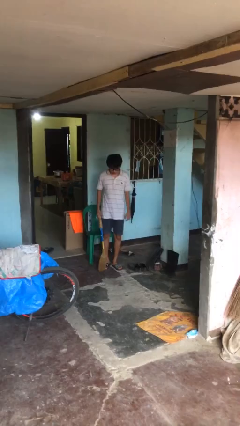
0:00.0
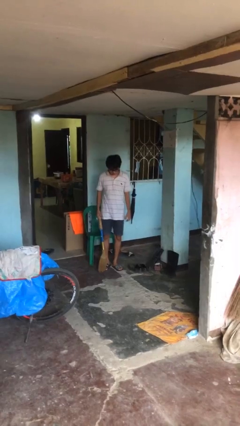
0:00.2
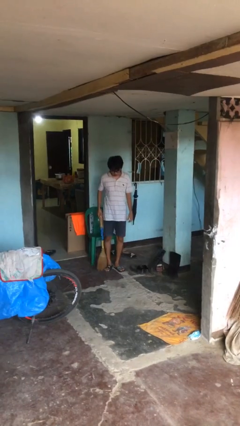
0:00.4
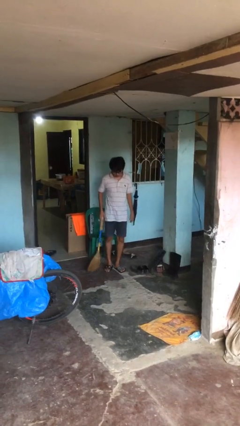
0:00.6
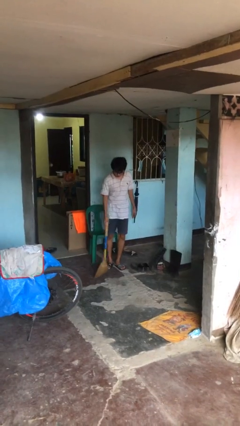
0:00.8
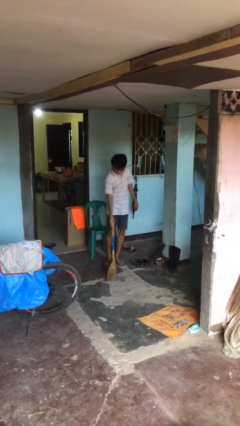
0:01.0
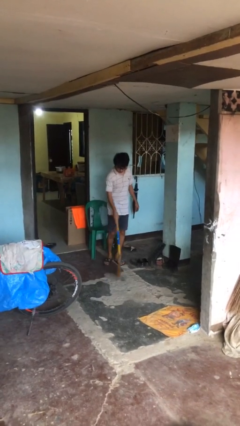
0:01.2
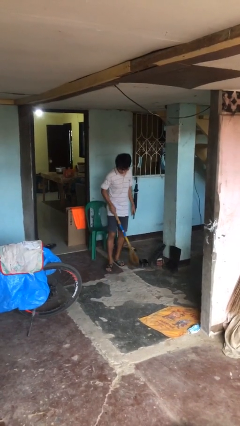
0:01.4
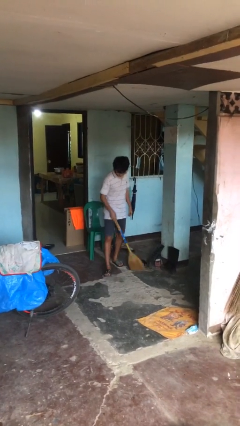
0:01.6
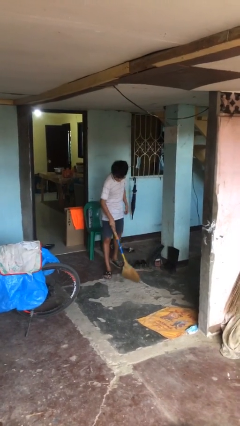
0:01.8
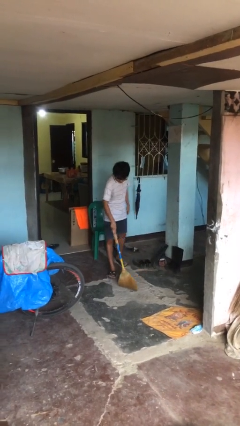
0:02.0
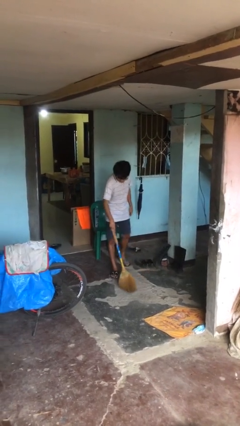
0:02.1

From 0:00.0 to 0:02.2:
person sweeps floor

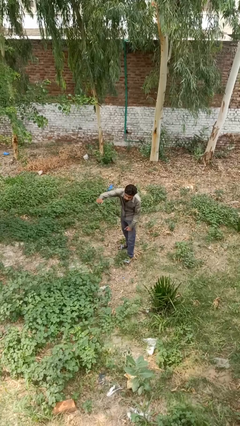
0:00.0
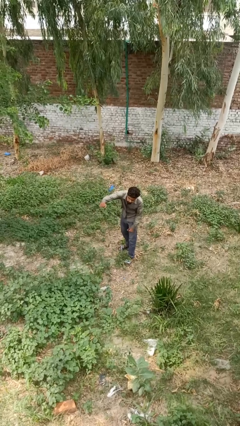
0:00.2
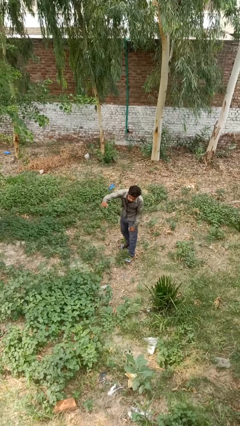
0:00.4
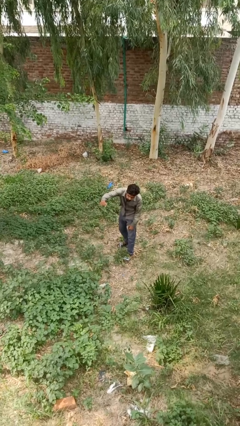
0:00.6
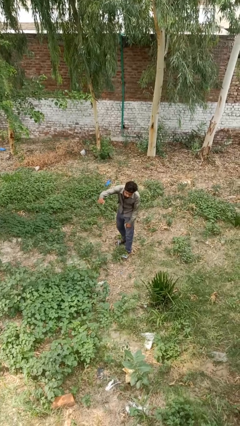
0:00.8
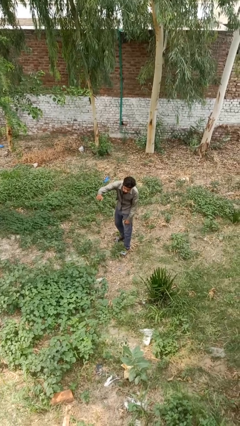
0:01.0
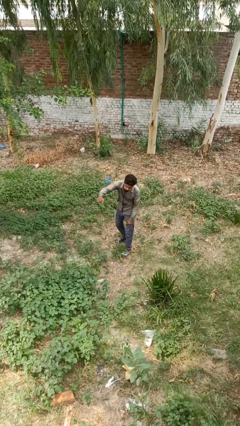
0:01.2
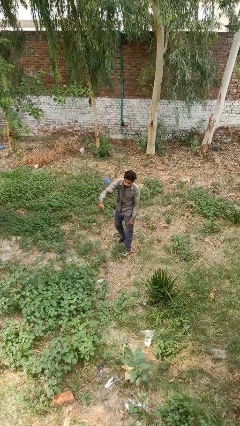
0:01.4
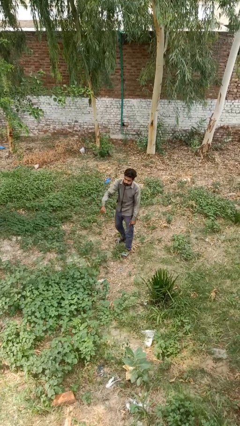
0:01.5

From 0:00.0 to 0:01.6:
person punches

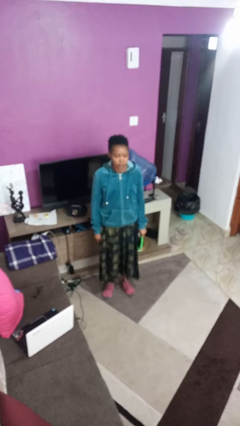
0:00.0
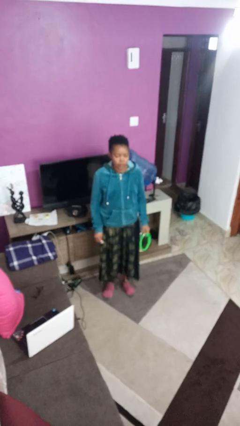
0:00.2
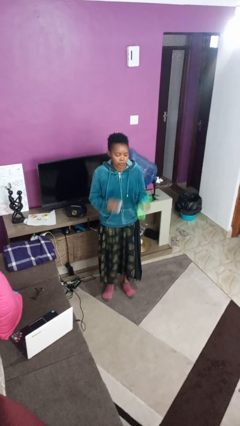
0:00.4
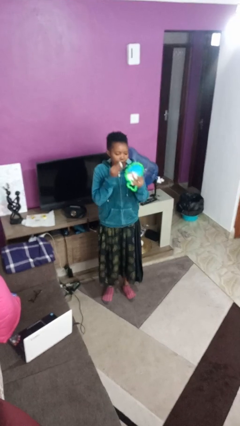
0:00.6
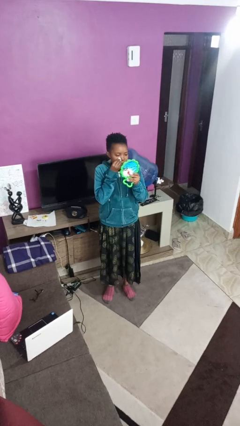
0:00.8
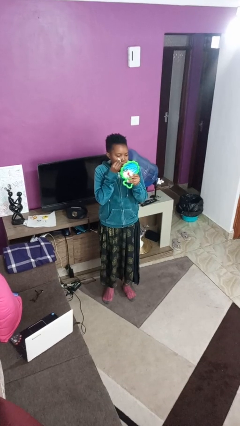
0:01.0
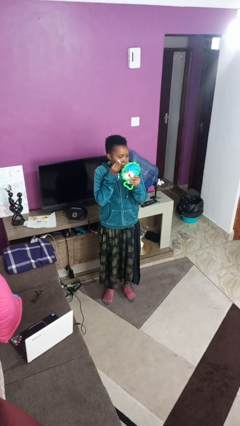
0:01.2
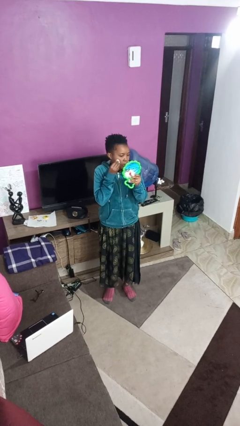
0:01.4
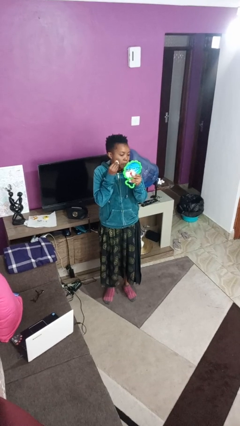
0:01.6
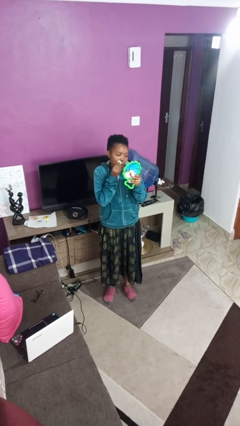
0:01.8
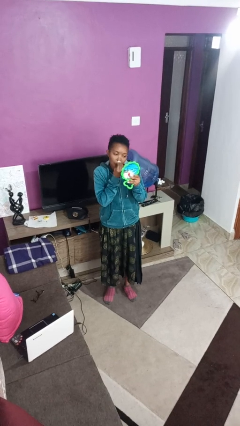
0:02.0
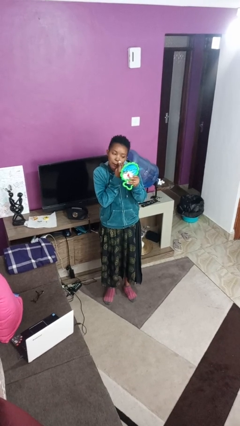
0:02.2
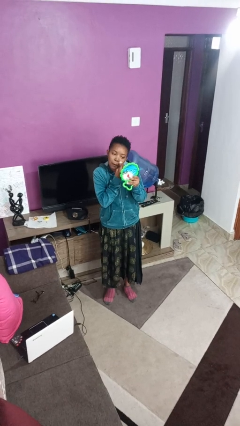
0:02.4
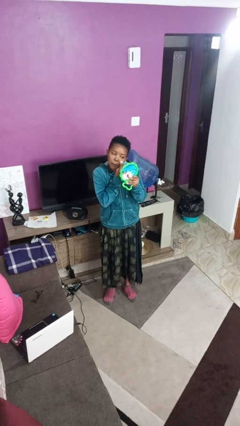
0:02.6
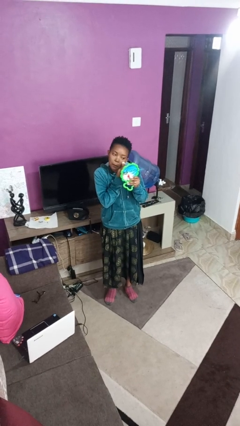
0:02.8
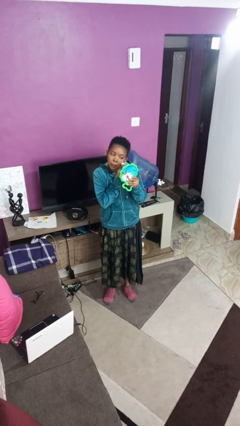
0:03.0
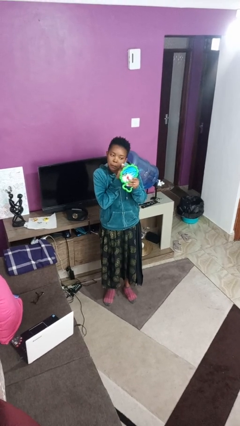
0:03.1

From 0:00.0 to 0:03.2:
person applies foundation makeup

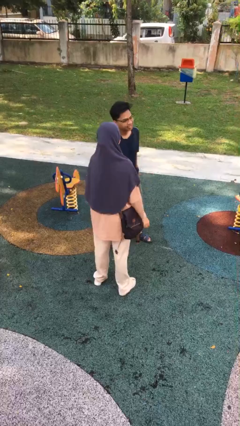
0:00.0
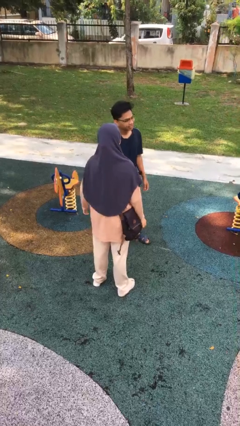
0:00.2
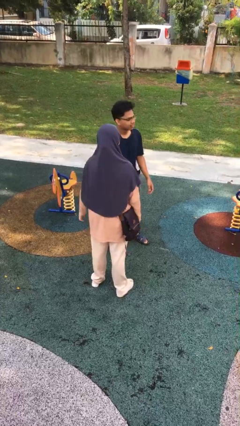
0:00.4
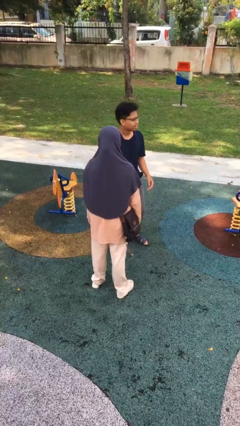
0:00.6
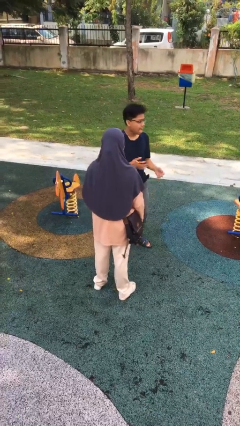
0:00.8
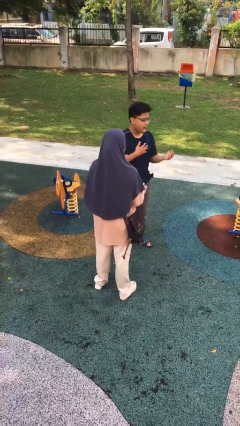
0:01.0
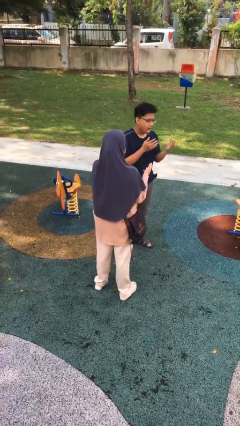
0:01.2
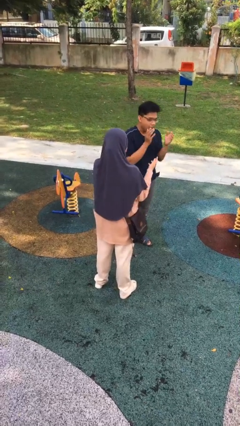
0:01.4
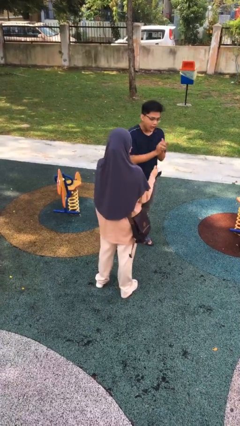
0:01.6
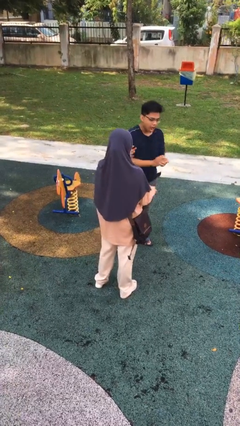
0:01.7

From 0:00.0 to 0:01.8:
person laughs with person

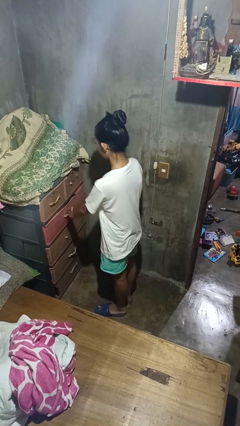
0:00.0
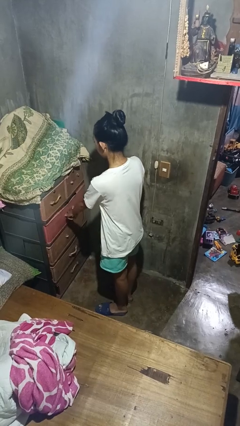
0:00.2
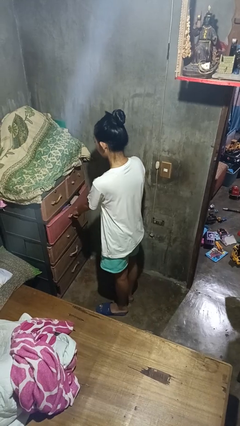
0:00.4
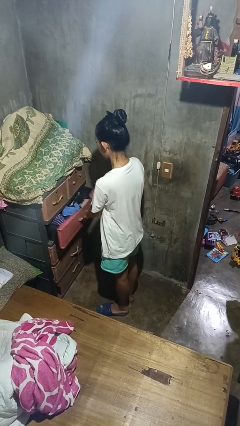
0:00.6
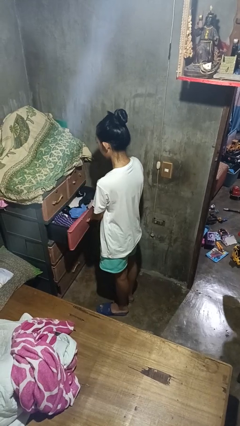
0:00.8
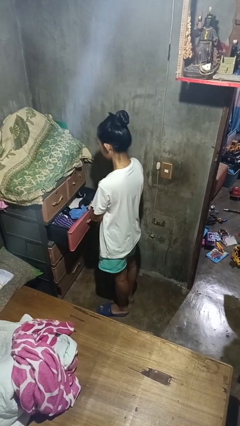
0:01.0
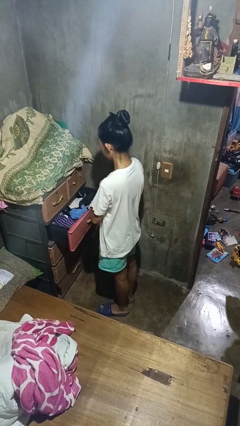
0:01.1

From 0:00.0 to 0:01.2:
person opens dresser drawer

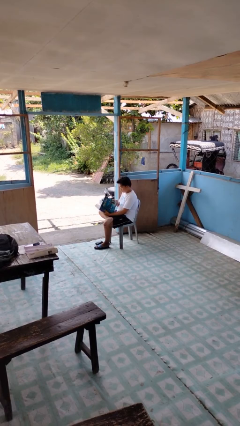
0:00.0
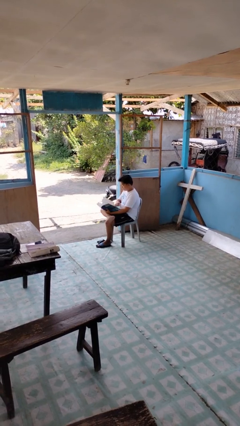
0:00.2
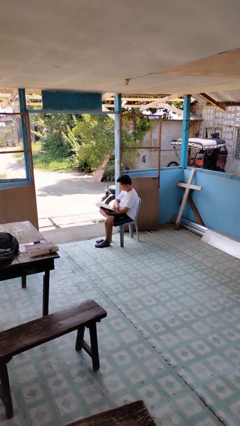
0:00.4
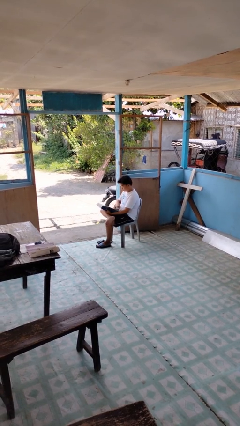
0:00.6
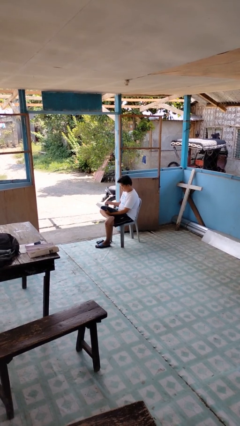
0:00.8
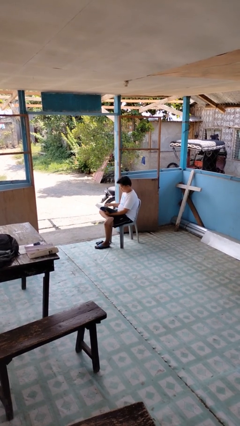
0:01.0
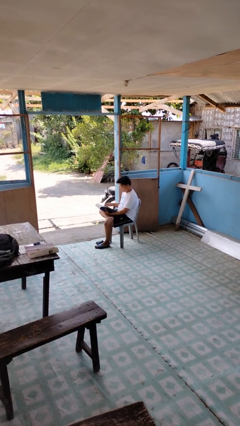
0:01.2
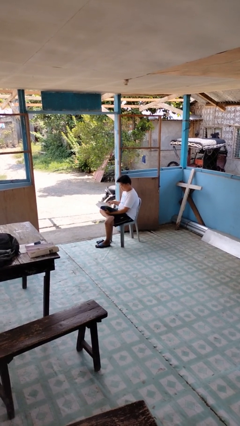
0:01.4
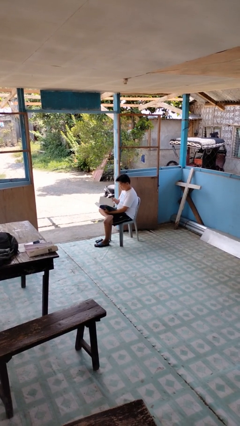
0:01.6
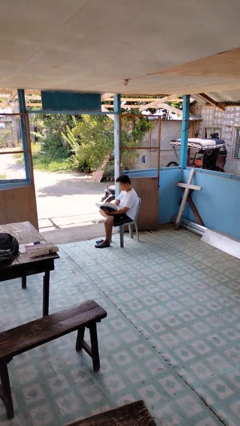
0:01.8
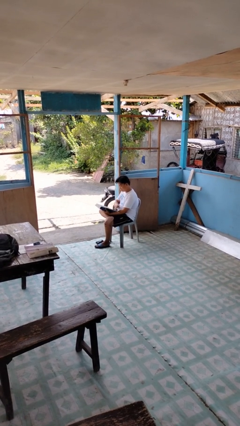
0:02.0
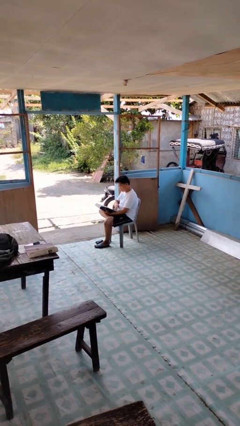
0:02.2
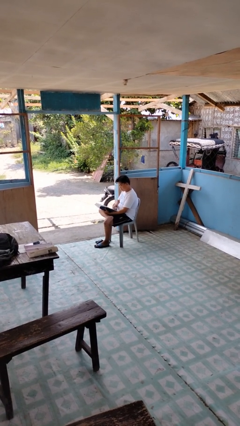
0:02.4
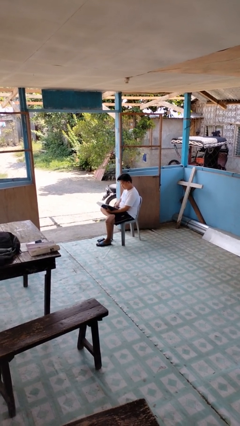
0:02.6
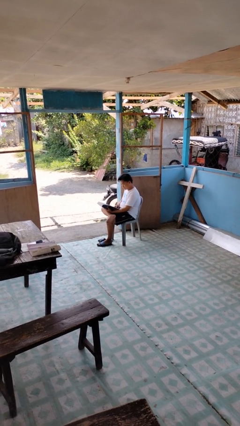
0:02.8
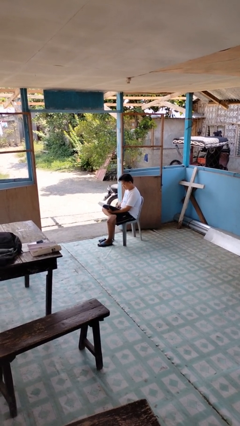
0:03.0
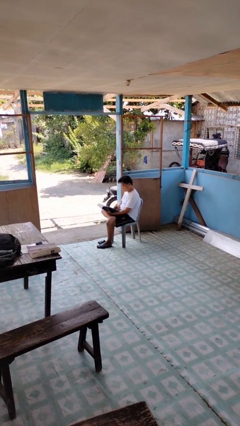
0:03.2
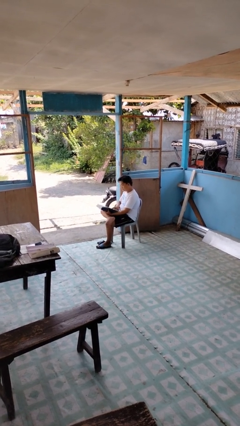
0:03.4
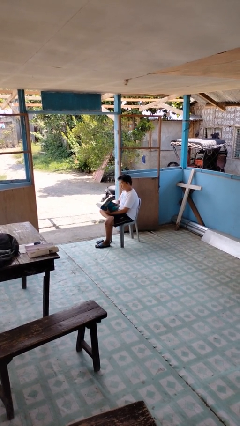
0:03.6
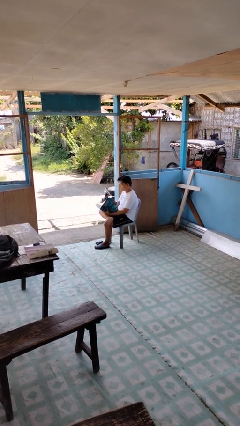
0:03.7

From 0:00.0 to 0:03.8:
person reads book

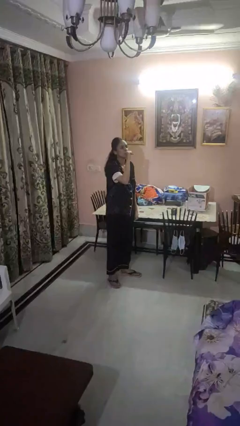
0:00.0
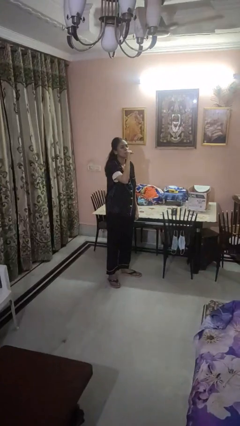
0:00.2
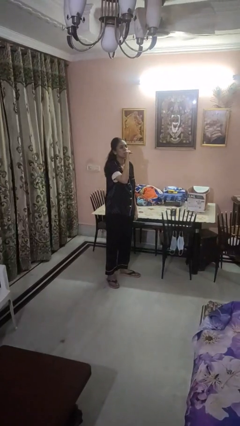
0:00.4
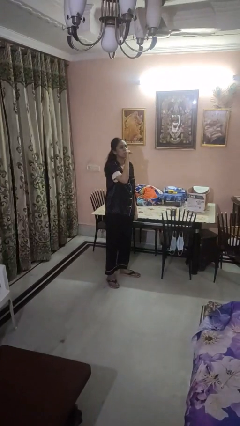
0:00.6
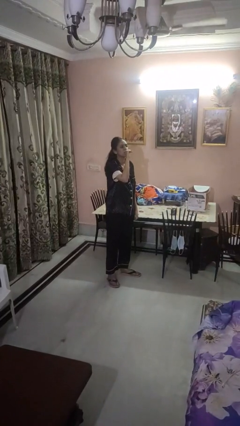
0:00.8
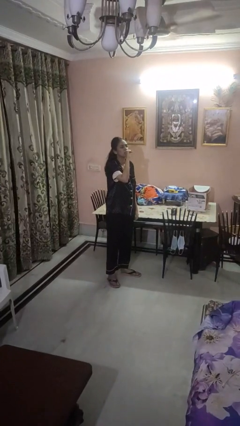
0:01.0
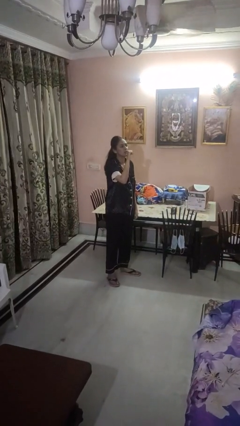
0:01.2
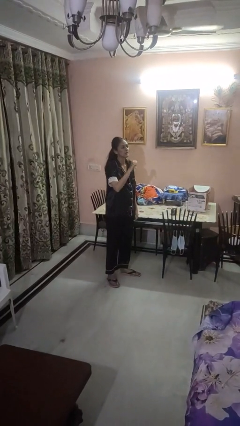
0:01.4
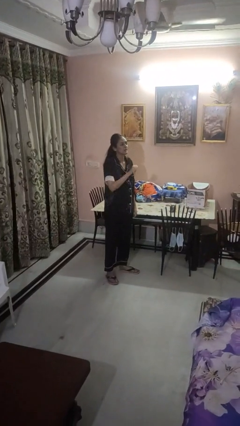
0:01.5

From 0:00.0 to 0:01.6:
person vapes

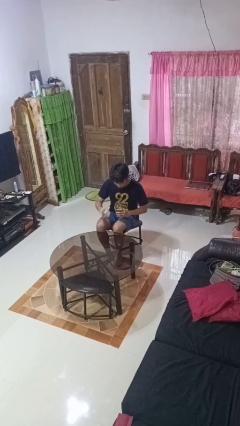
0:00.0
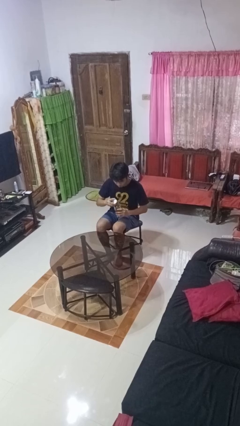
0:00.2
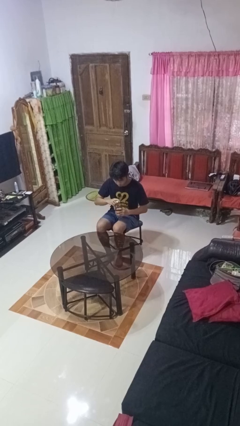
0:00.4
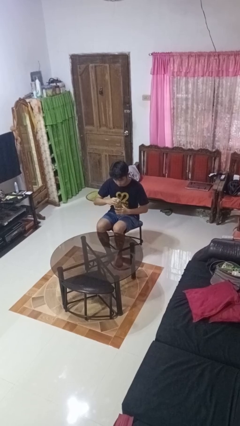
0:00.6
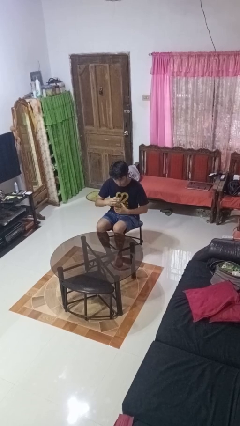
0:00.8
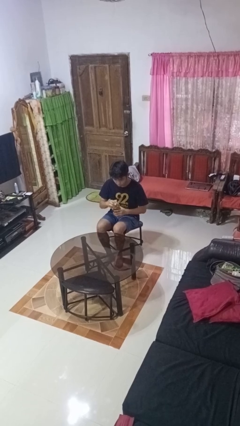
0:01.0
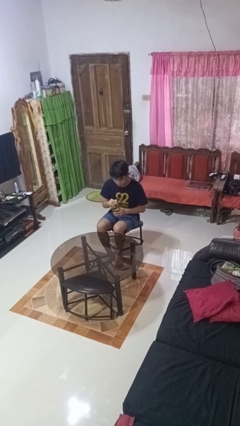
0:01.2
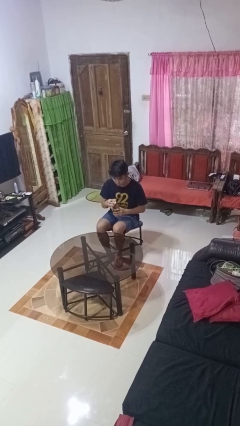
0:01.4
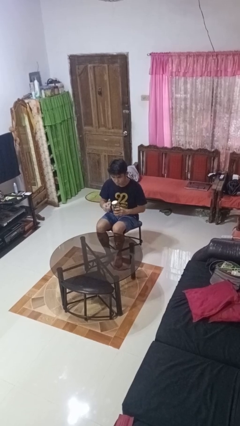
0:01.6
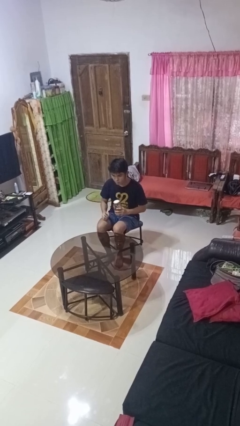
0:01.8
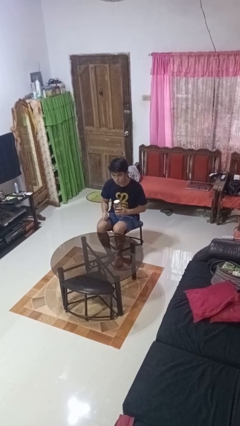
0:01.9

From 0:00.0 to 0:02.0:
person closes jar
